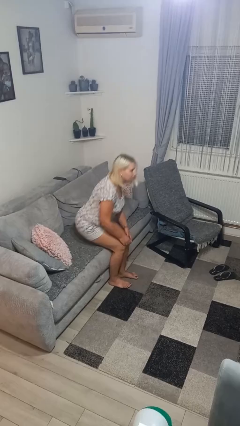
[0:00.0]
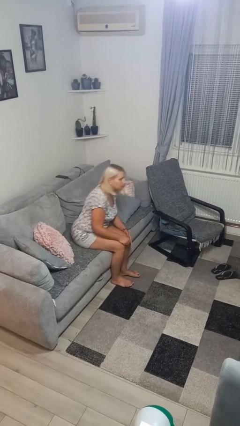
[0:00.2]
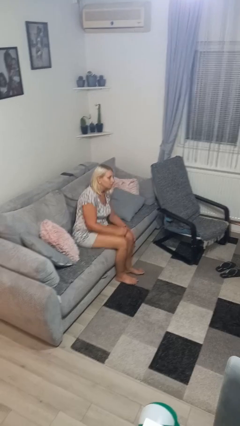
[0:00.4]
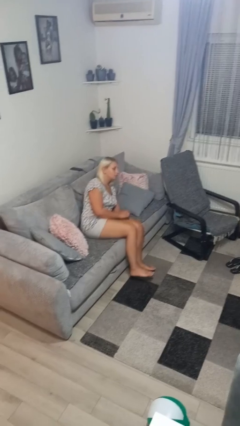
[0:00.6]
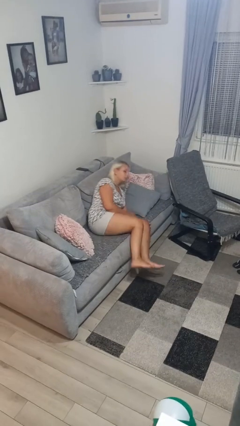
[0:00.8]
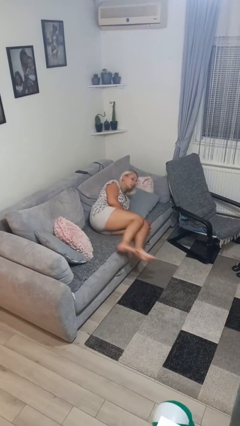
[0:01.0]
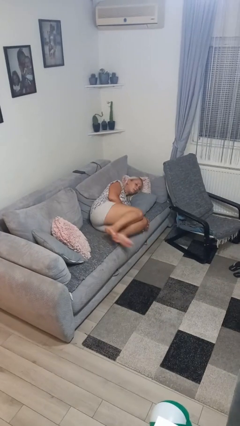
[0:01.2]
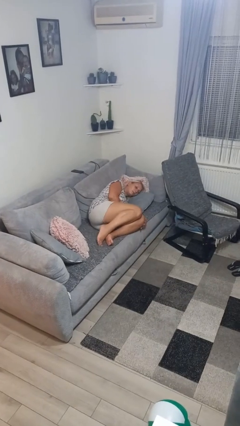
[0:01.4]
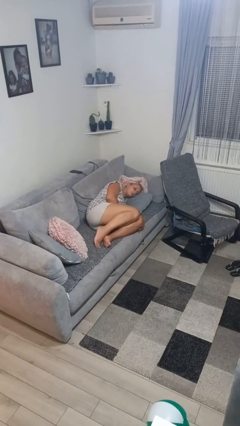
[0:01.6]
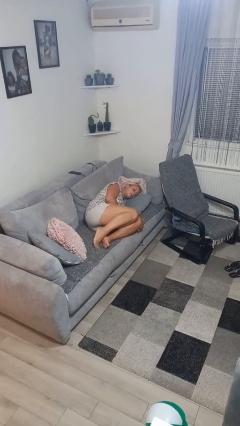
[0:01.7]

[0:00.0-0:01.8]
person lies down on couch

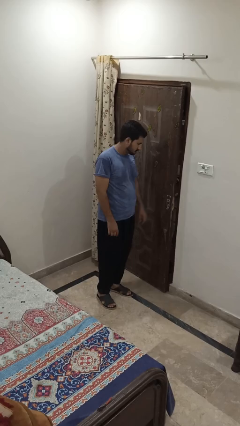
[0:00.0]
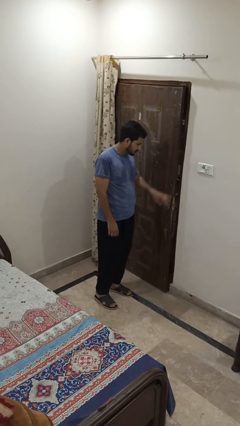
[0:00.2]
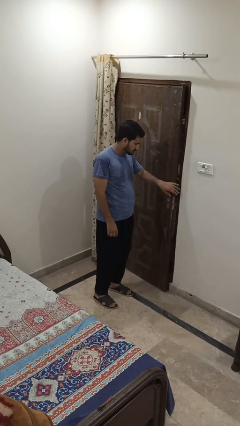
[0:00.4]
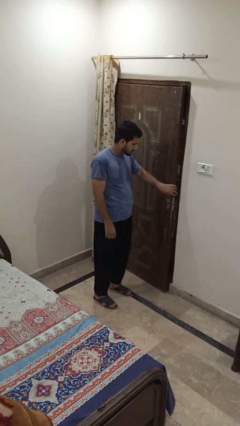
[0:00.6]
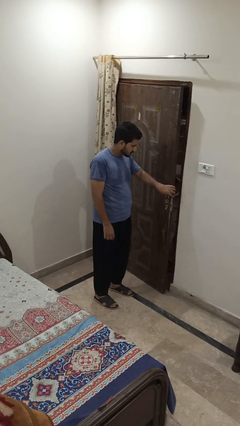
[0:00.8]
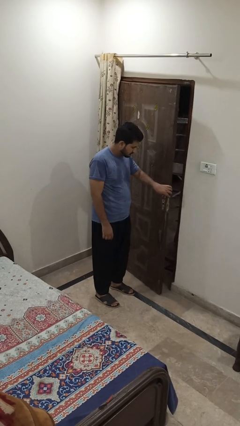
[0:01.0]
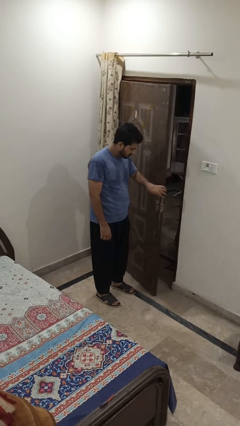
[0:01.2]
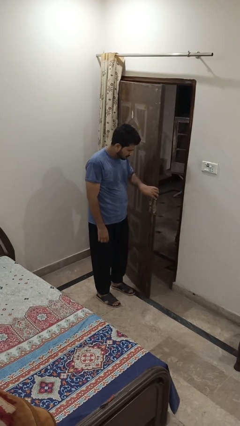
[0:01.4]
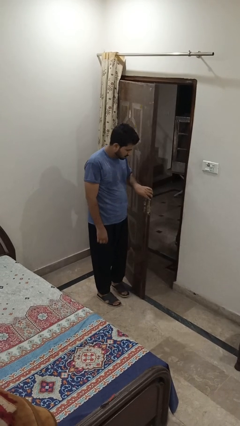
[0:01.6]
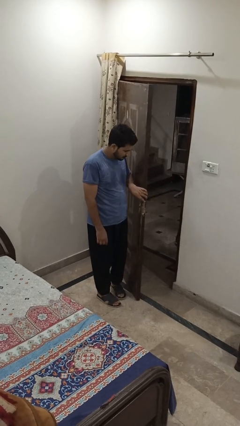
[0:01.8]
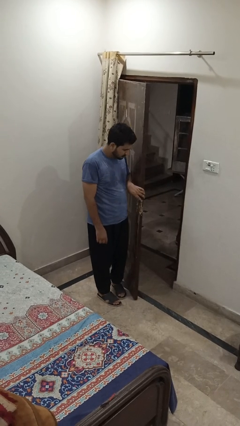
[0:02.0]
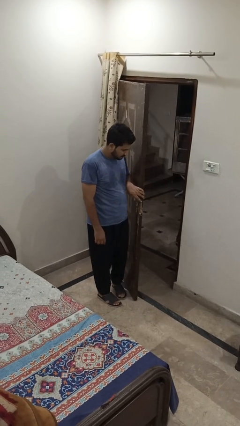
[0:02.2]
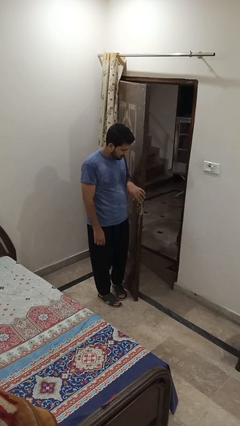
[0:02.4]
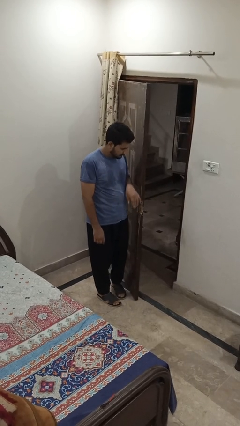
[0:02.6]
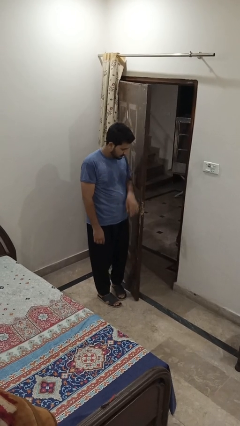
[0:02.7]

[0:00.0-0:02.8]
person opens facility door

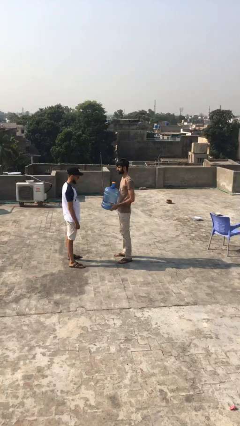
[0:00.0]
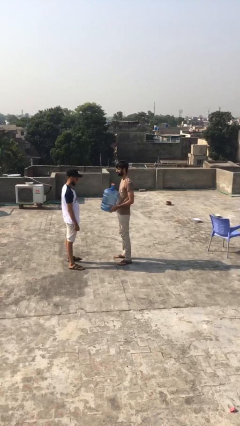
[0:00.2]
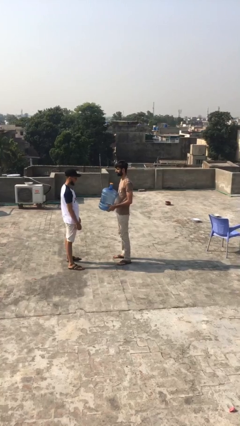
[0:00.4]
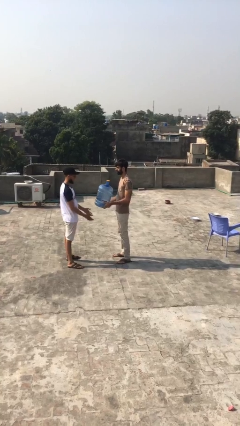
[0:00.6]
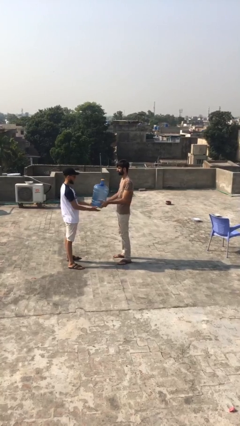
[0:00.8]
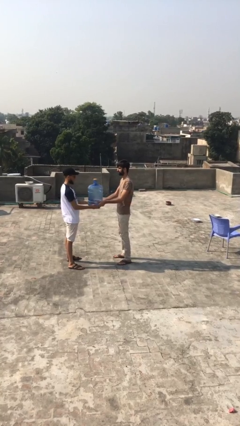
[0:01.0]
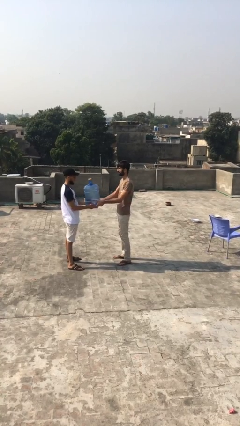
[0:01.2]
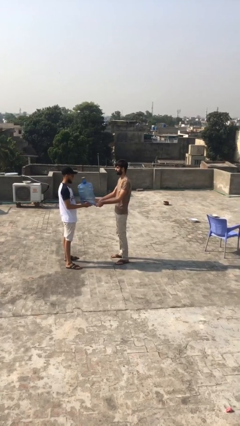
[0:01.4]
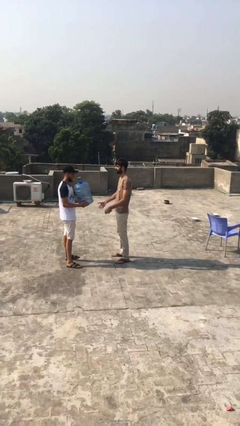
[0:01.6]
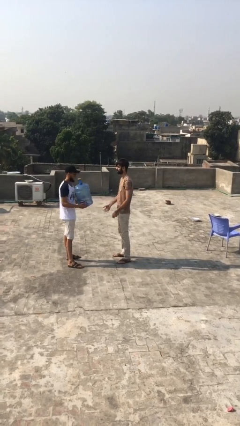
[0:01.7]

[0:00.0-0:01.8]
person transfers object to person

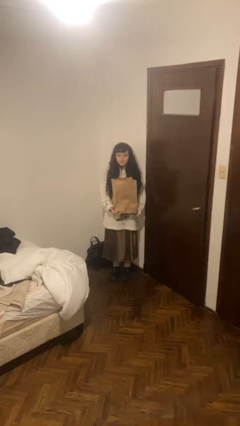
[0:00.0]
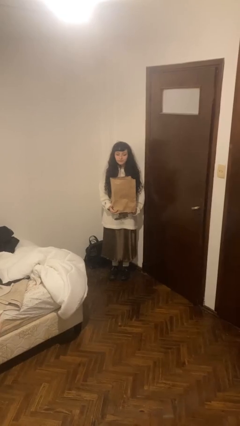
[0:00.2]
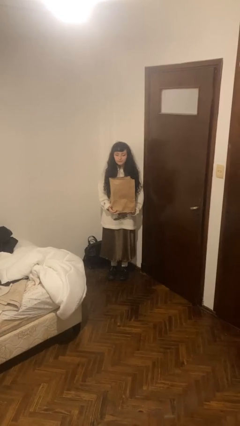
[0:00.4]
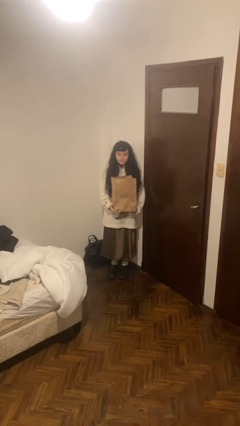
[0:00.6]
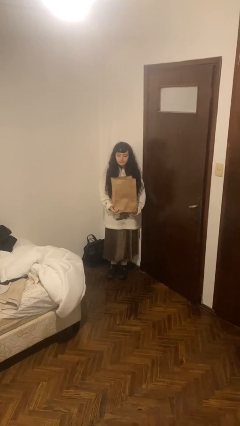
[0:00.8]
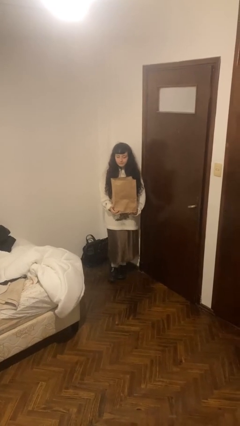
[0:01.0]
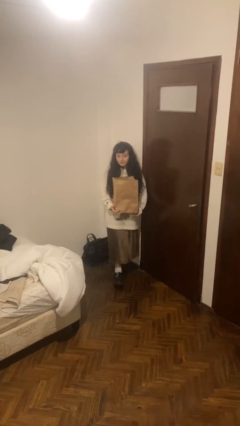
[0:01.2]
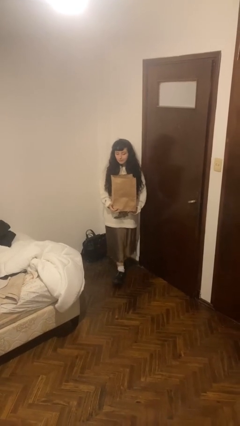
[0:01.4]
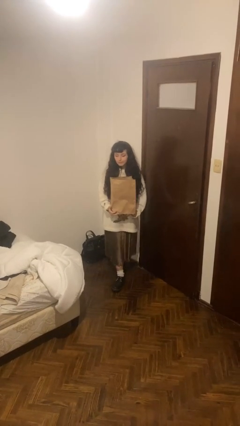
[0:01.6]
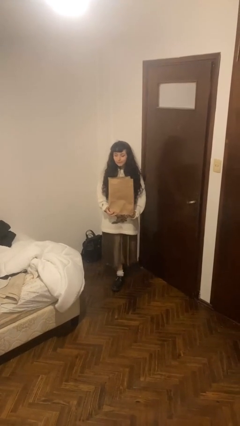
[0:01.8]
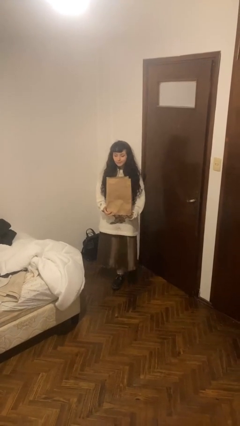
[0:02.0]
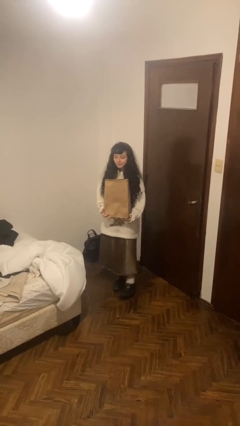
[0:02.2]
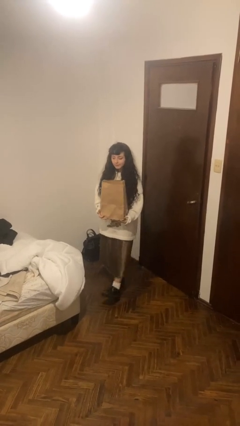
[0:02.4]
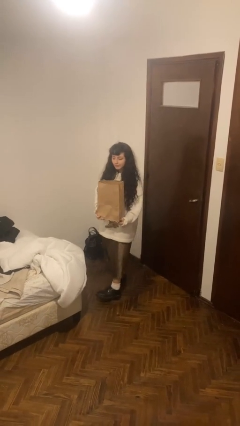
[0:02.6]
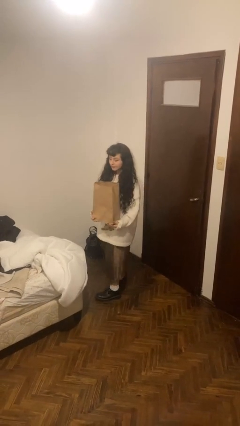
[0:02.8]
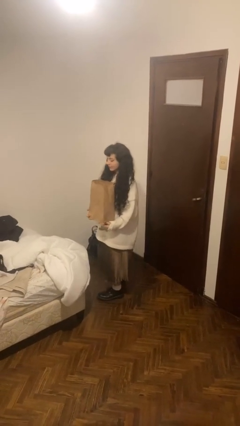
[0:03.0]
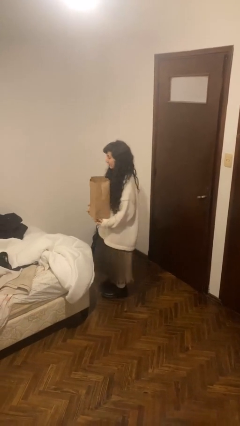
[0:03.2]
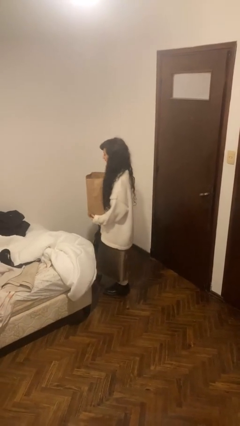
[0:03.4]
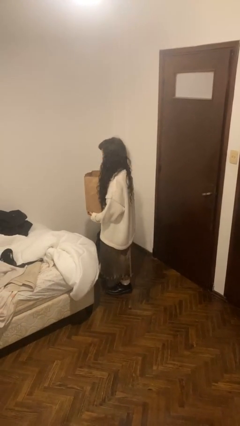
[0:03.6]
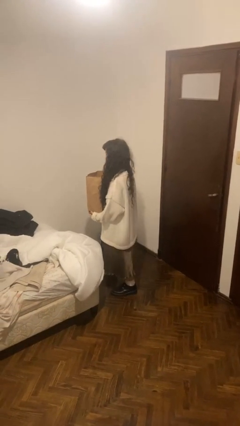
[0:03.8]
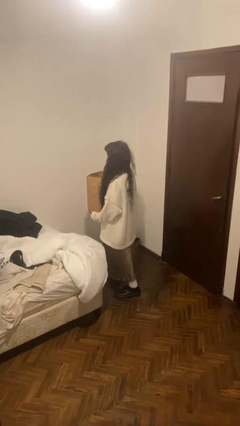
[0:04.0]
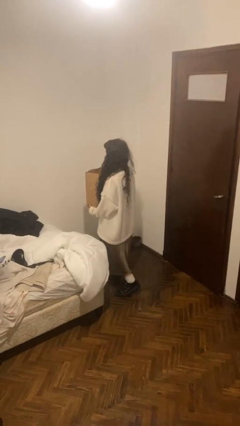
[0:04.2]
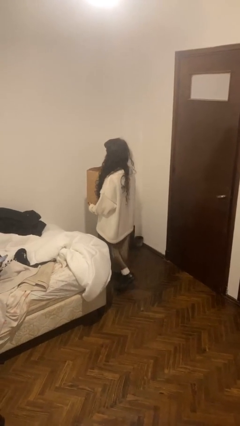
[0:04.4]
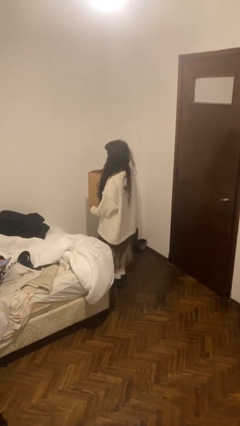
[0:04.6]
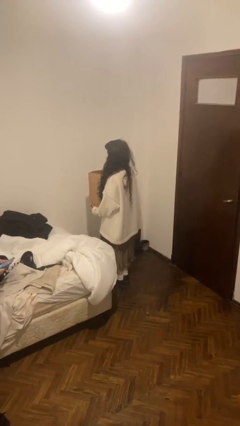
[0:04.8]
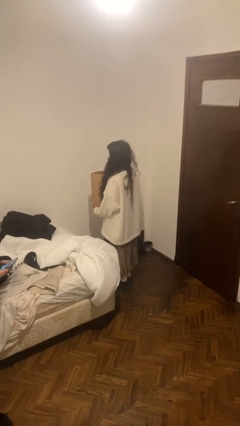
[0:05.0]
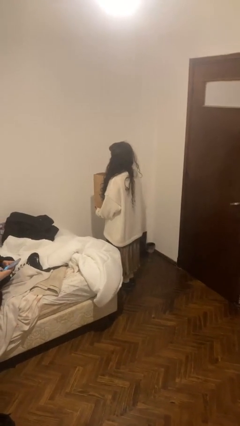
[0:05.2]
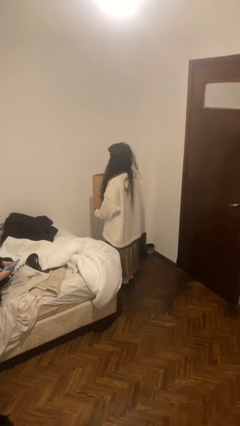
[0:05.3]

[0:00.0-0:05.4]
person carries groceries

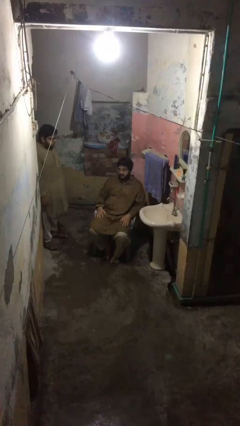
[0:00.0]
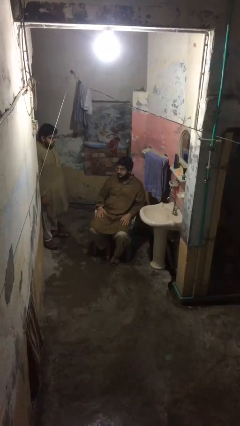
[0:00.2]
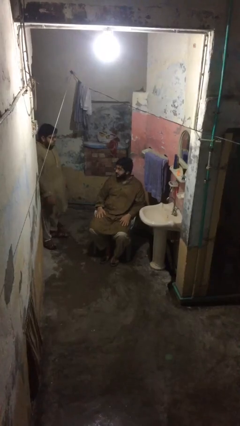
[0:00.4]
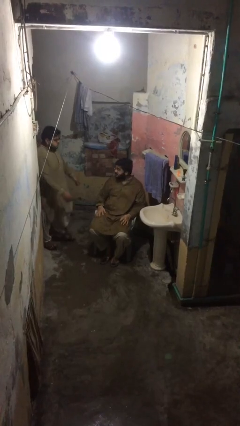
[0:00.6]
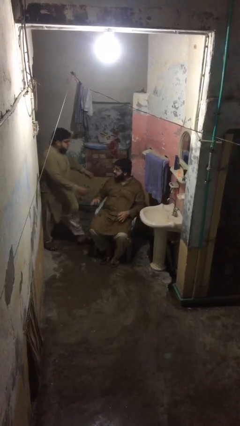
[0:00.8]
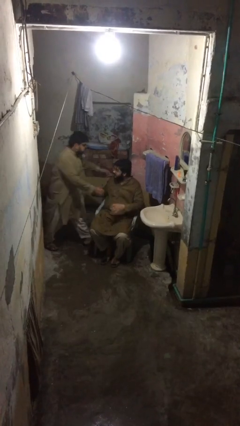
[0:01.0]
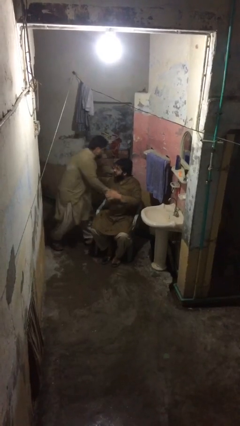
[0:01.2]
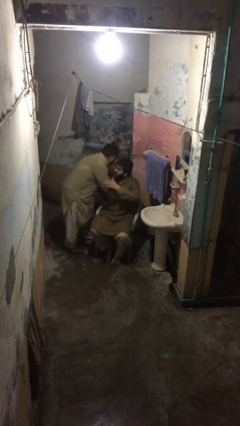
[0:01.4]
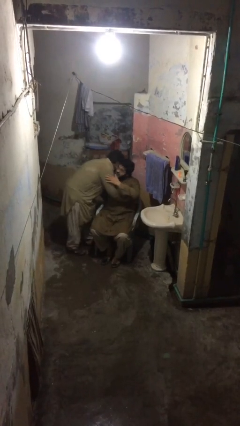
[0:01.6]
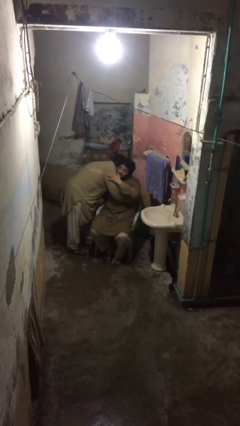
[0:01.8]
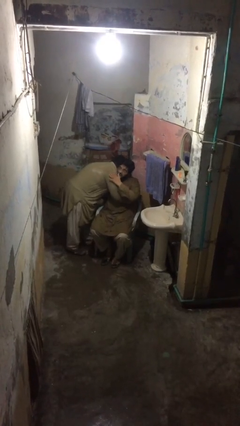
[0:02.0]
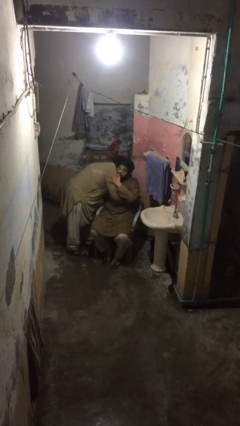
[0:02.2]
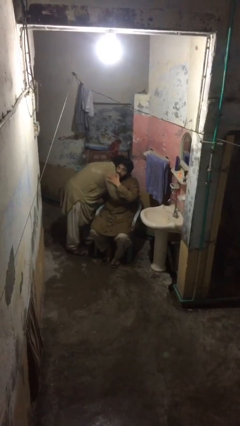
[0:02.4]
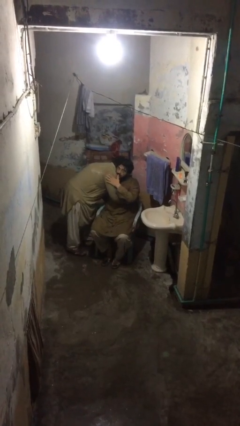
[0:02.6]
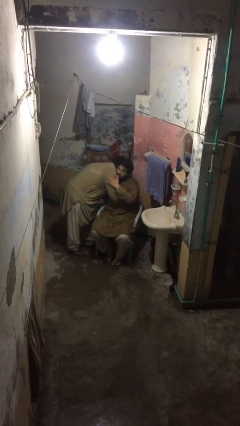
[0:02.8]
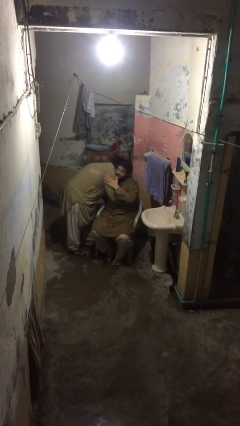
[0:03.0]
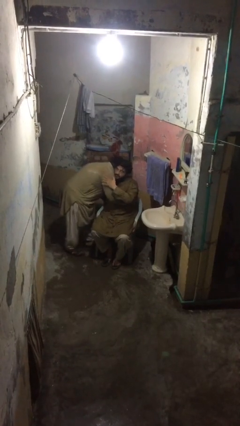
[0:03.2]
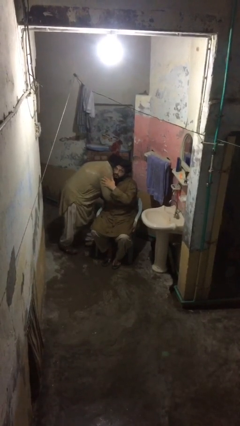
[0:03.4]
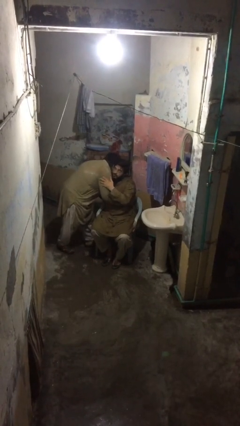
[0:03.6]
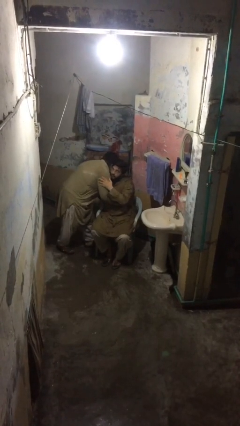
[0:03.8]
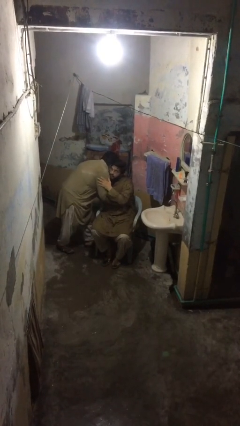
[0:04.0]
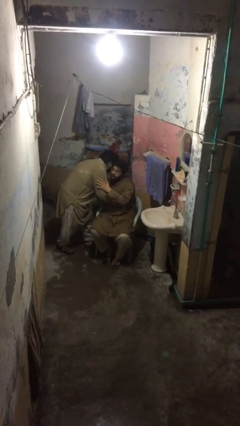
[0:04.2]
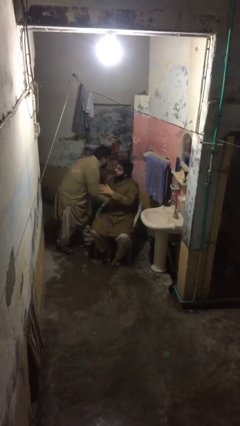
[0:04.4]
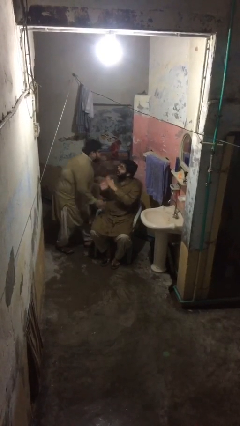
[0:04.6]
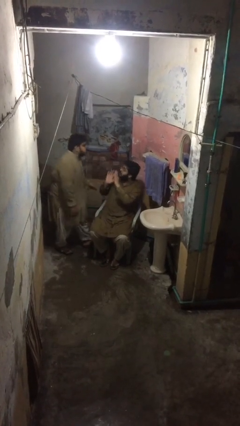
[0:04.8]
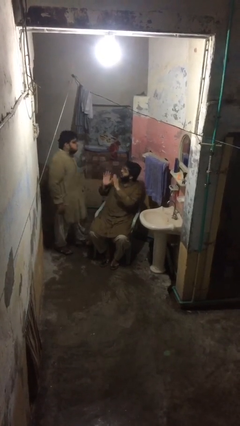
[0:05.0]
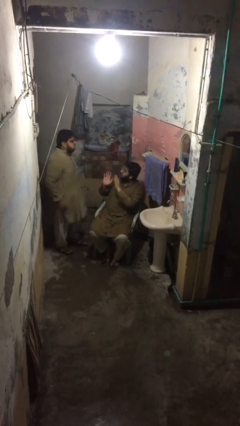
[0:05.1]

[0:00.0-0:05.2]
person embraces person

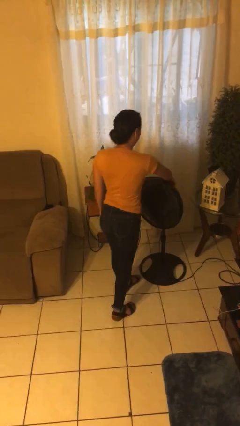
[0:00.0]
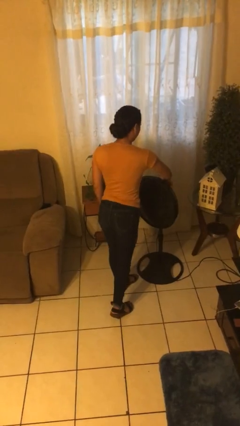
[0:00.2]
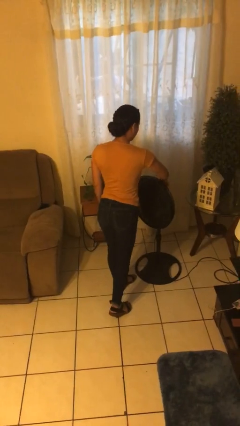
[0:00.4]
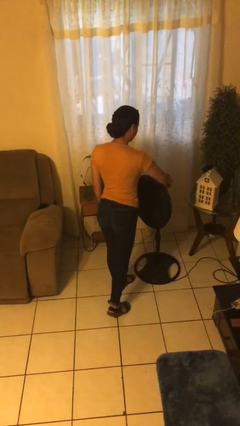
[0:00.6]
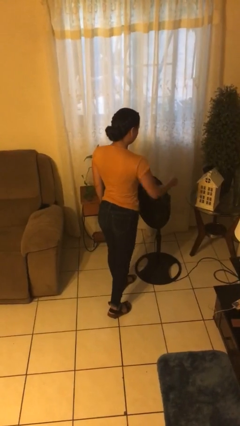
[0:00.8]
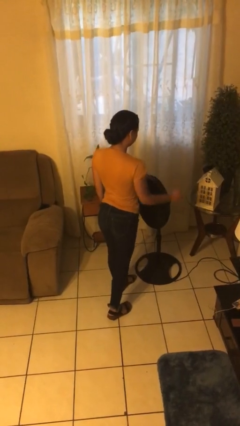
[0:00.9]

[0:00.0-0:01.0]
person turns off fan
